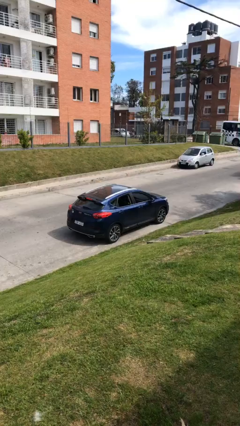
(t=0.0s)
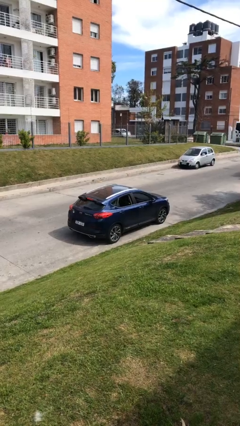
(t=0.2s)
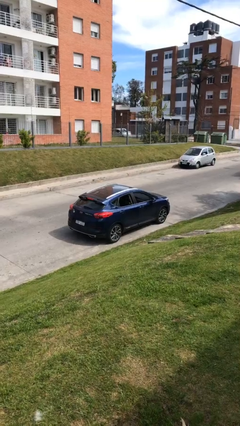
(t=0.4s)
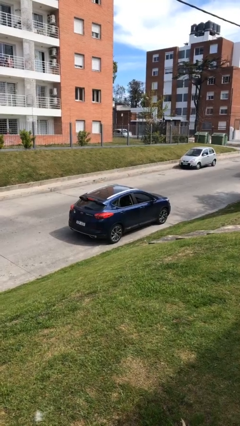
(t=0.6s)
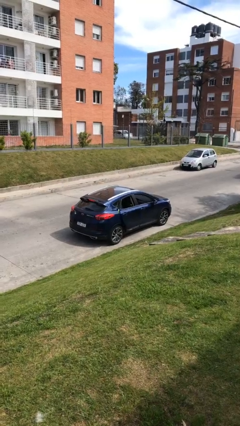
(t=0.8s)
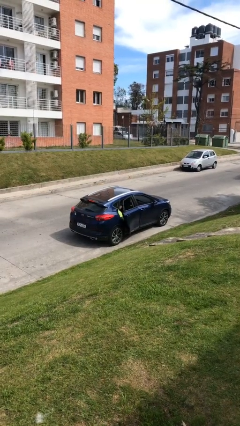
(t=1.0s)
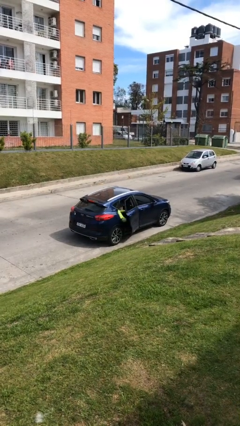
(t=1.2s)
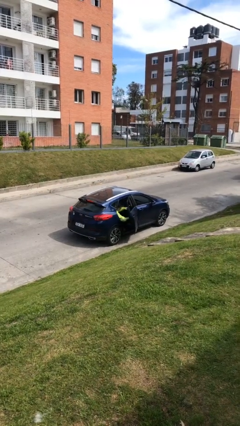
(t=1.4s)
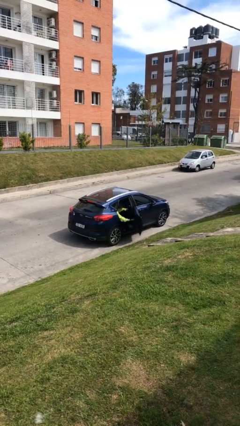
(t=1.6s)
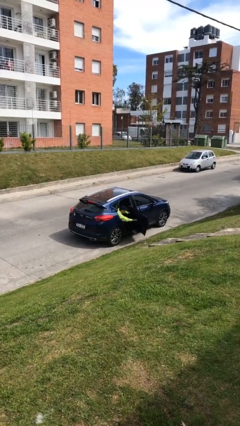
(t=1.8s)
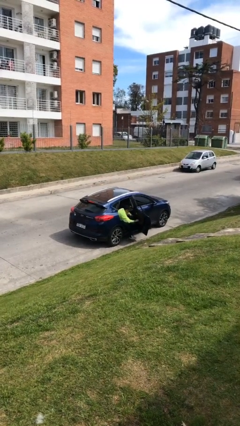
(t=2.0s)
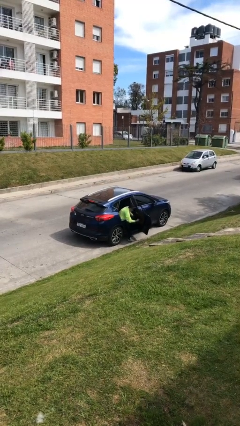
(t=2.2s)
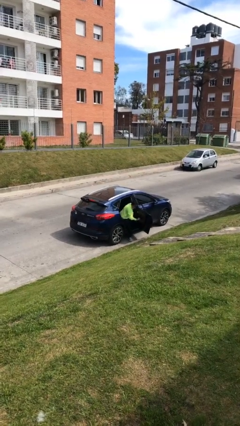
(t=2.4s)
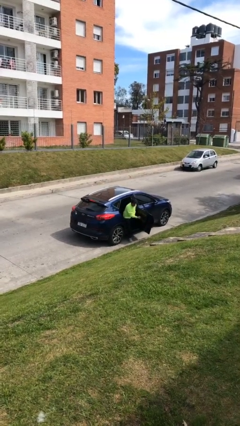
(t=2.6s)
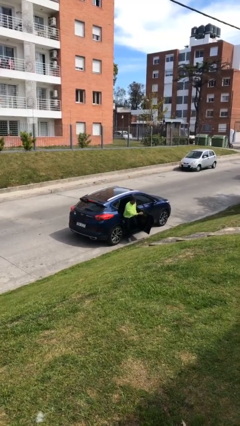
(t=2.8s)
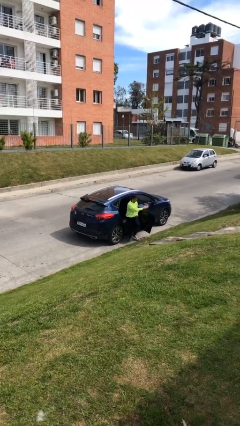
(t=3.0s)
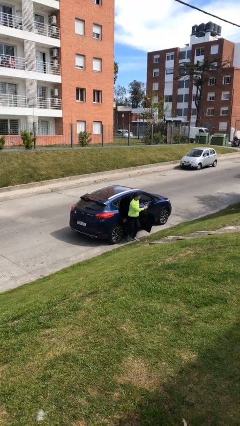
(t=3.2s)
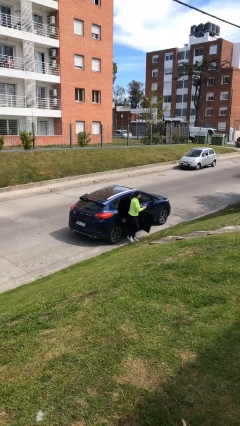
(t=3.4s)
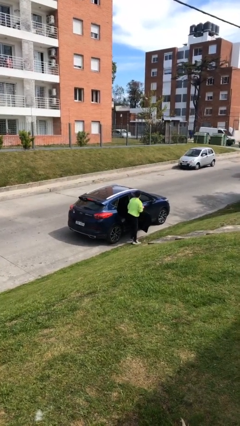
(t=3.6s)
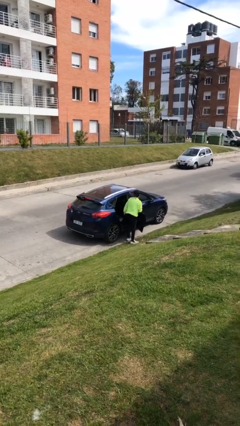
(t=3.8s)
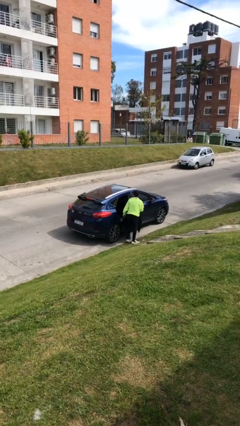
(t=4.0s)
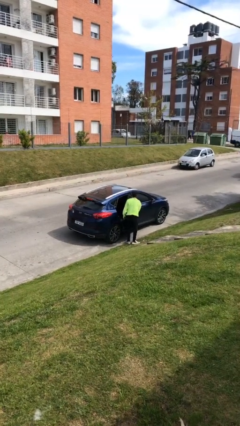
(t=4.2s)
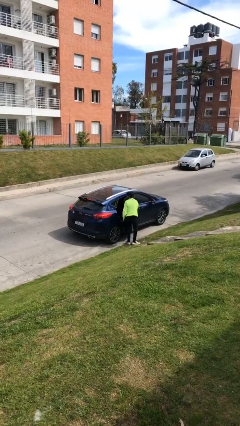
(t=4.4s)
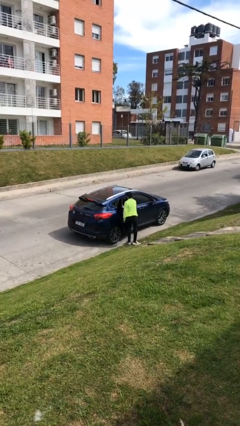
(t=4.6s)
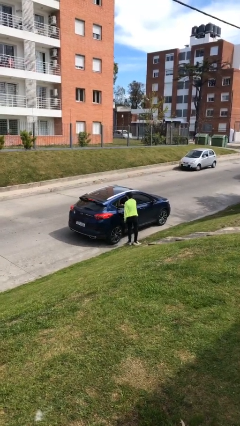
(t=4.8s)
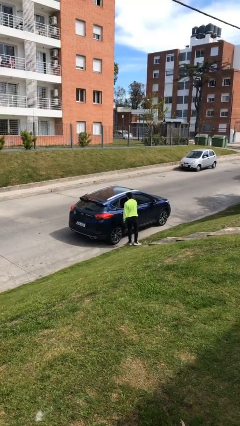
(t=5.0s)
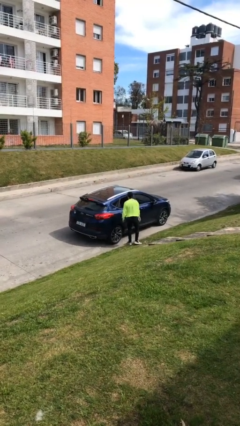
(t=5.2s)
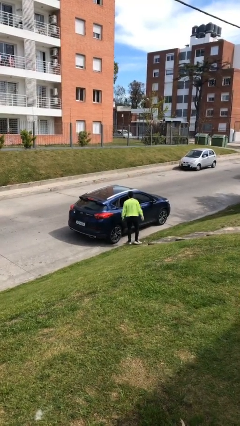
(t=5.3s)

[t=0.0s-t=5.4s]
car drops off person

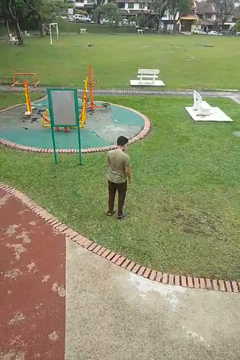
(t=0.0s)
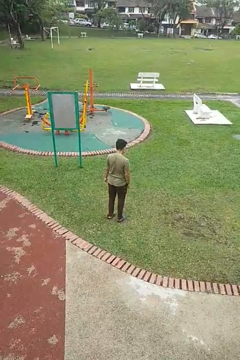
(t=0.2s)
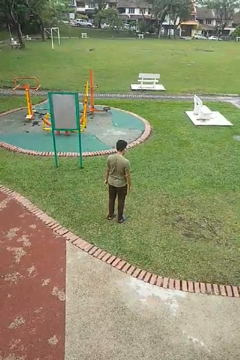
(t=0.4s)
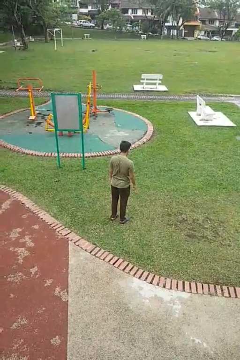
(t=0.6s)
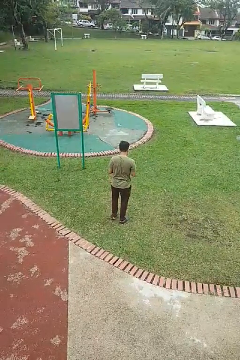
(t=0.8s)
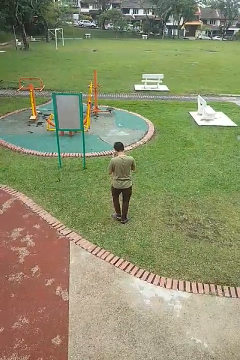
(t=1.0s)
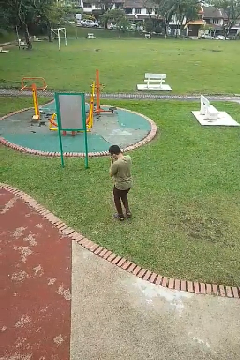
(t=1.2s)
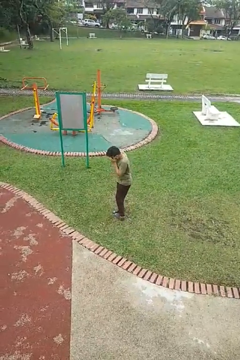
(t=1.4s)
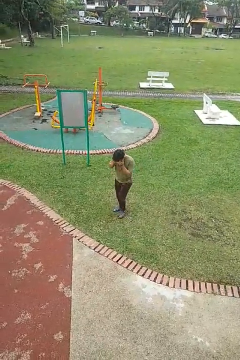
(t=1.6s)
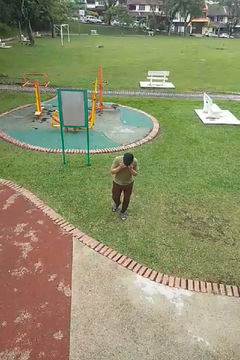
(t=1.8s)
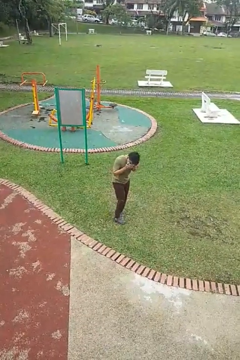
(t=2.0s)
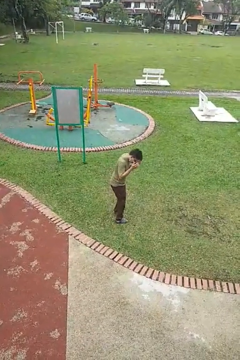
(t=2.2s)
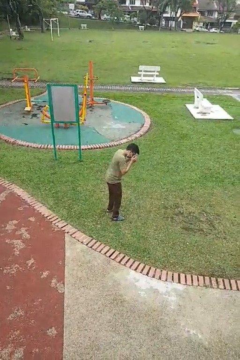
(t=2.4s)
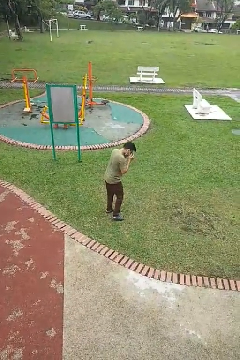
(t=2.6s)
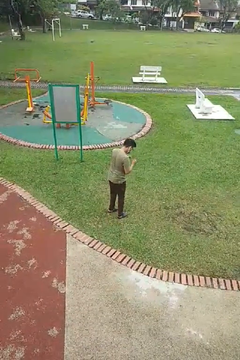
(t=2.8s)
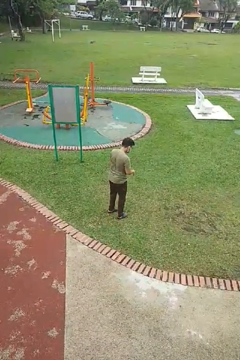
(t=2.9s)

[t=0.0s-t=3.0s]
person twirls

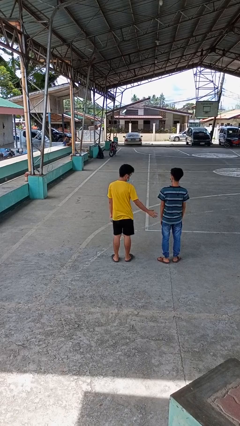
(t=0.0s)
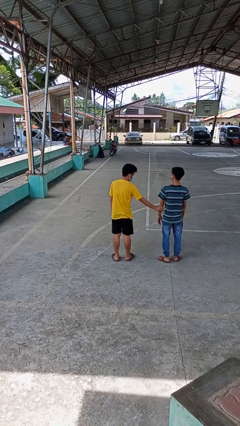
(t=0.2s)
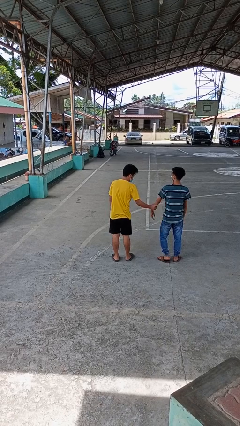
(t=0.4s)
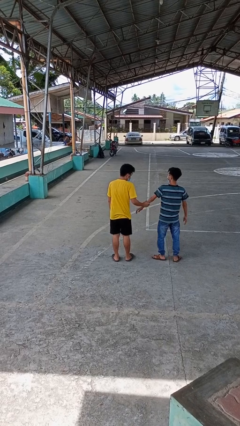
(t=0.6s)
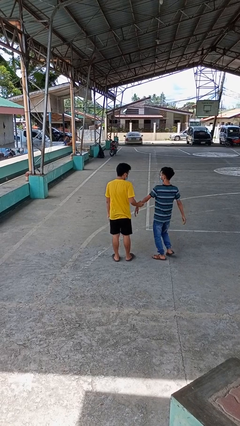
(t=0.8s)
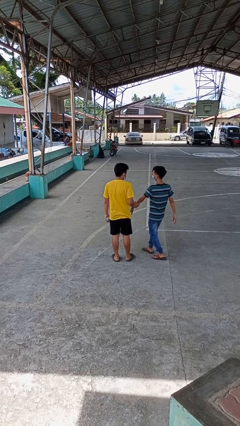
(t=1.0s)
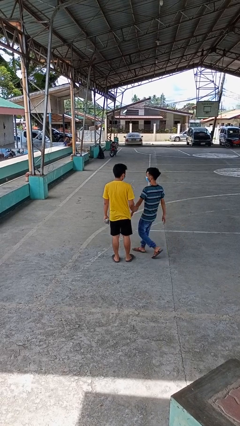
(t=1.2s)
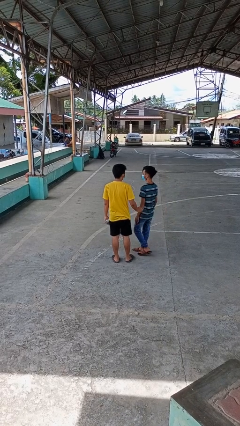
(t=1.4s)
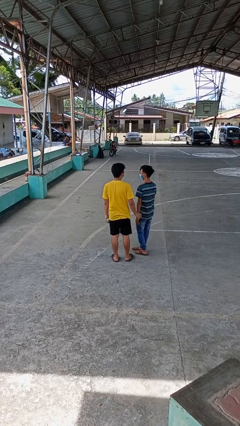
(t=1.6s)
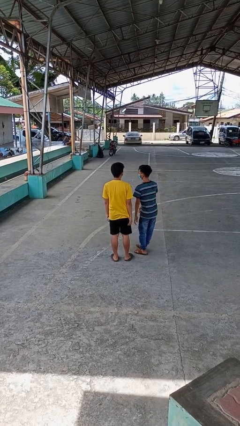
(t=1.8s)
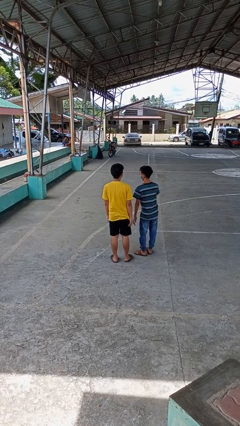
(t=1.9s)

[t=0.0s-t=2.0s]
person grabs person by forearm

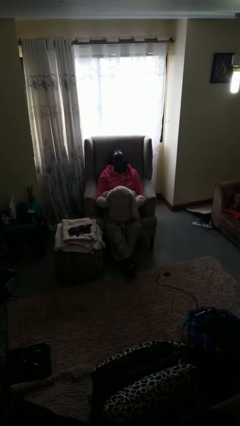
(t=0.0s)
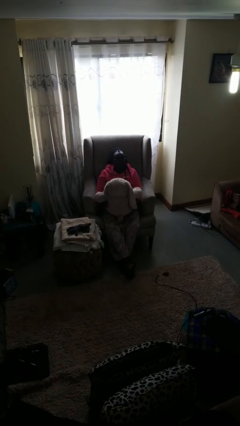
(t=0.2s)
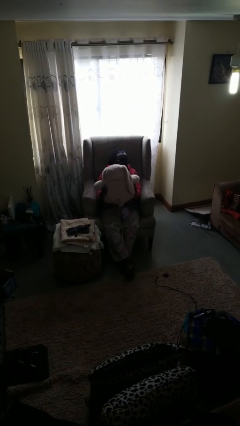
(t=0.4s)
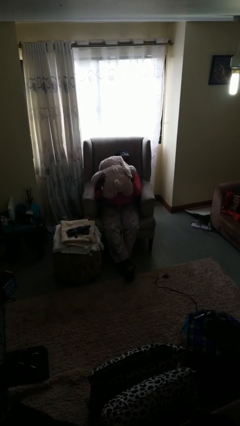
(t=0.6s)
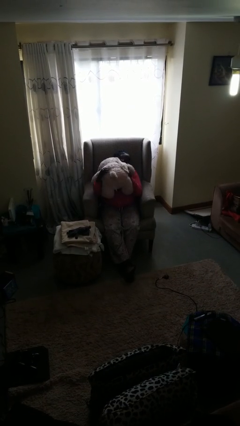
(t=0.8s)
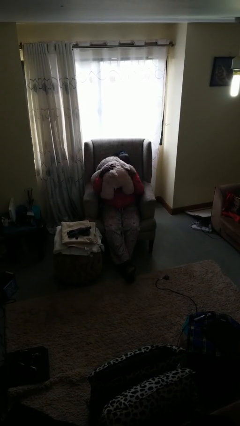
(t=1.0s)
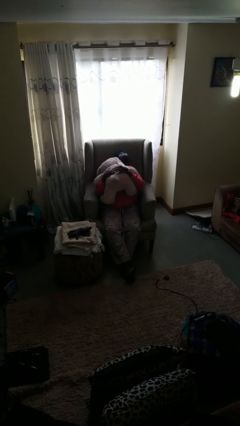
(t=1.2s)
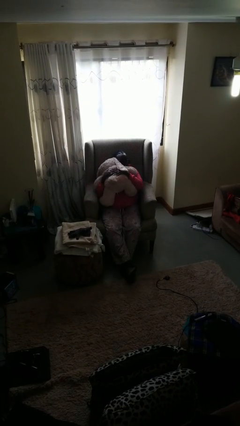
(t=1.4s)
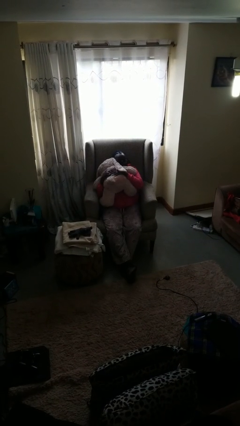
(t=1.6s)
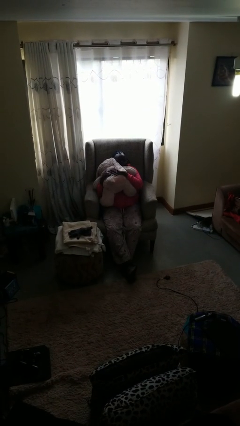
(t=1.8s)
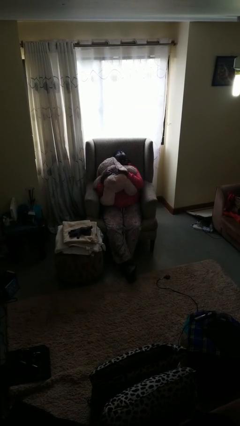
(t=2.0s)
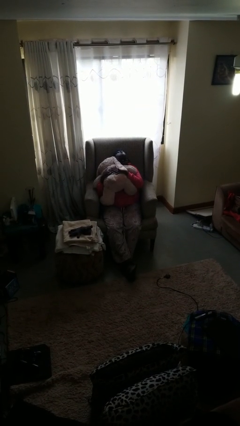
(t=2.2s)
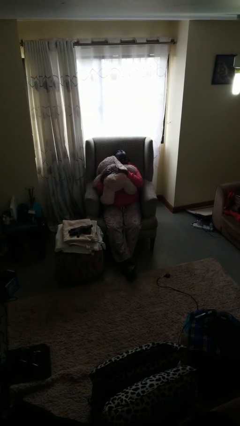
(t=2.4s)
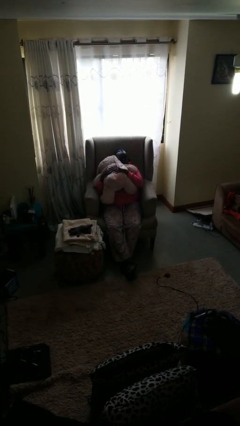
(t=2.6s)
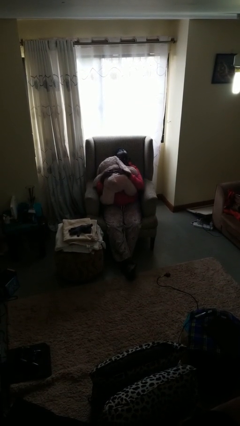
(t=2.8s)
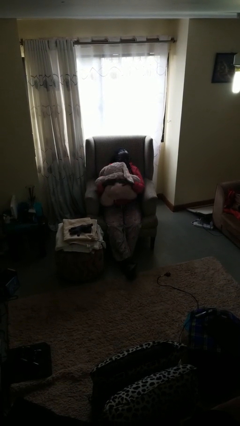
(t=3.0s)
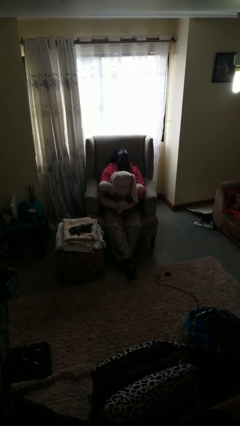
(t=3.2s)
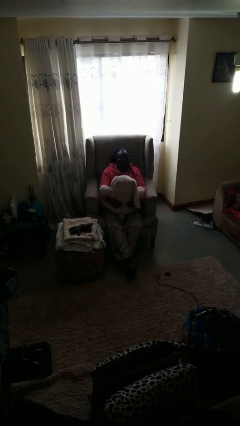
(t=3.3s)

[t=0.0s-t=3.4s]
person hugs stuffed animal

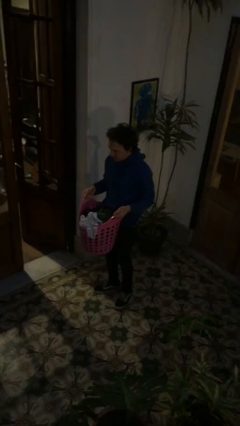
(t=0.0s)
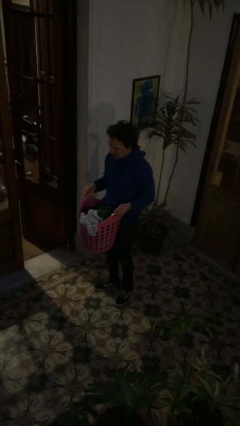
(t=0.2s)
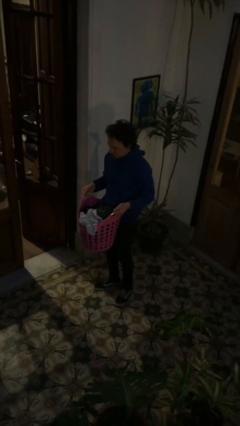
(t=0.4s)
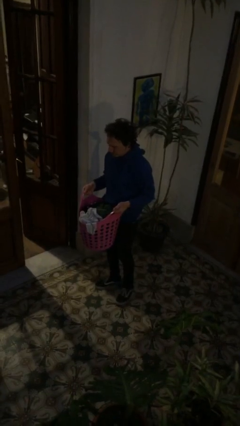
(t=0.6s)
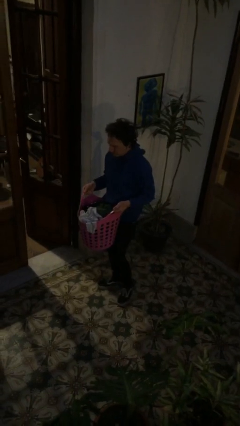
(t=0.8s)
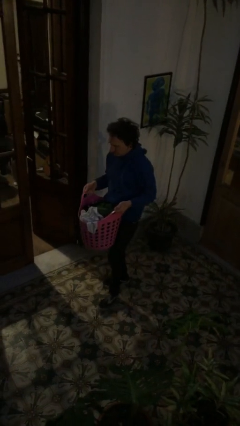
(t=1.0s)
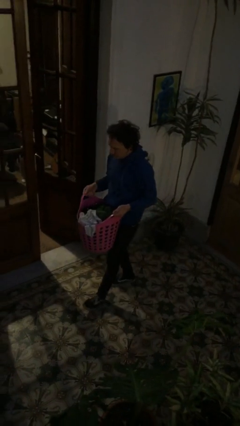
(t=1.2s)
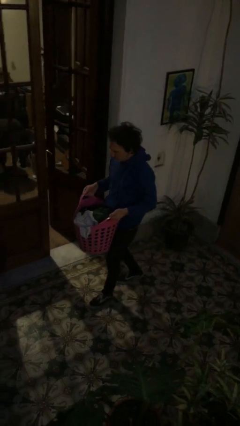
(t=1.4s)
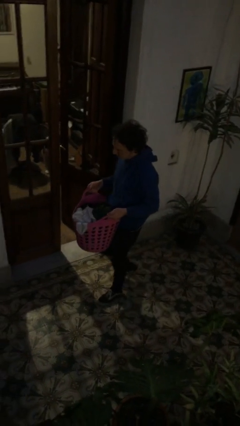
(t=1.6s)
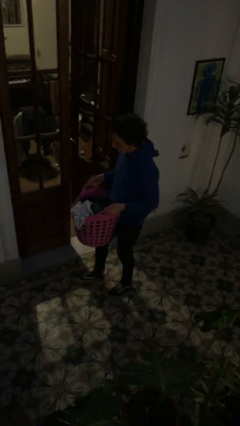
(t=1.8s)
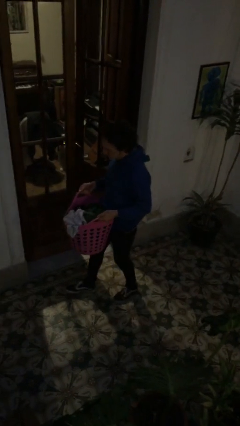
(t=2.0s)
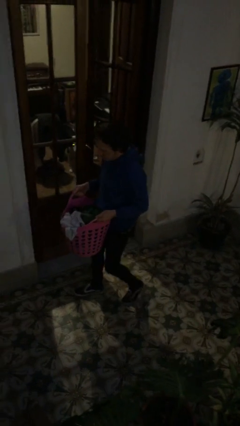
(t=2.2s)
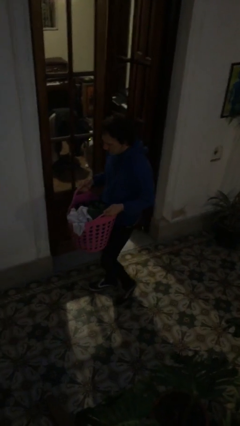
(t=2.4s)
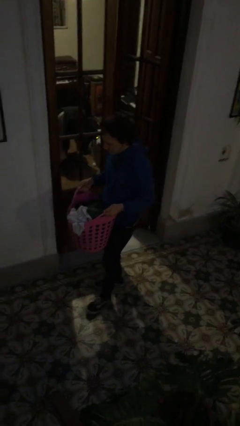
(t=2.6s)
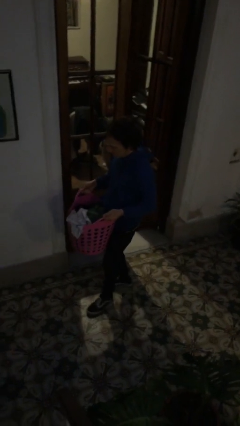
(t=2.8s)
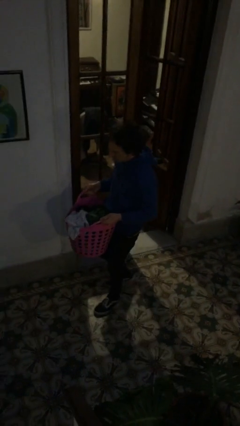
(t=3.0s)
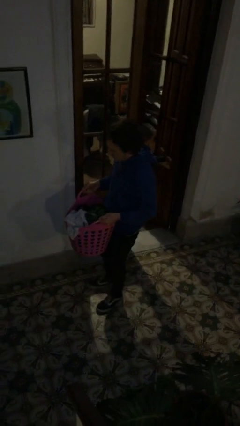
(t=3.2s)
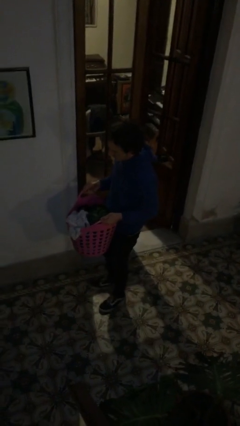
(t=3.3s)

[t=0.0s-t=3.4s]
person carries laundry basket

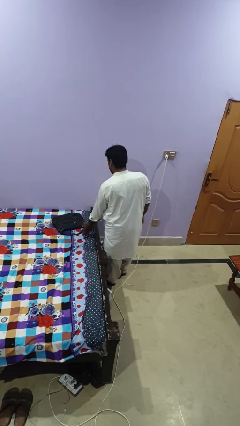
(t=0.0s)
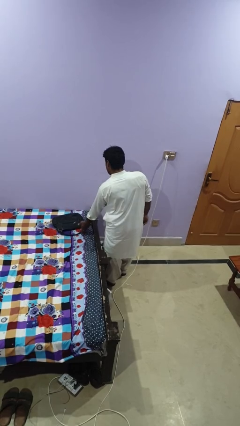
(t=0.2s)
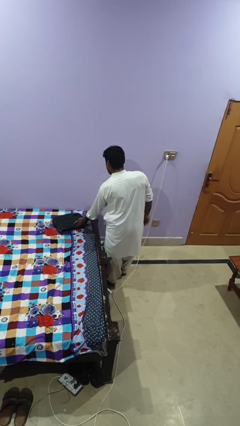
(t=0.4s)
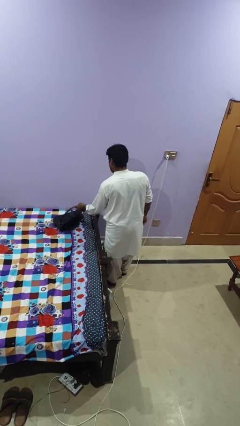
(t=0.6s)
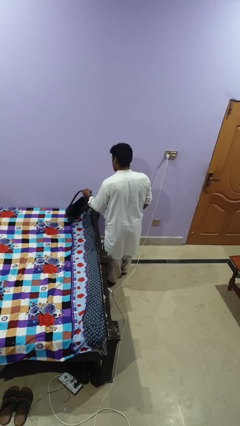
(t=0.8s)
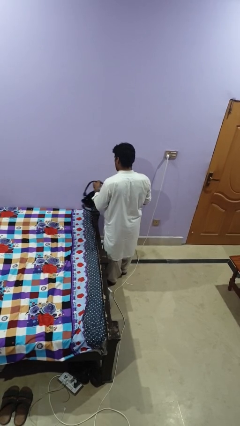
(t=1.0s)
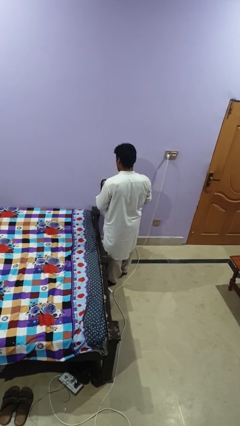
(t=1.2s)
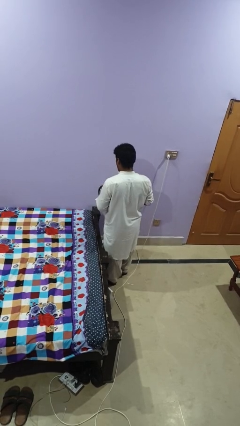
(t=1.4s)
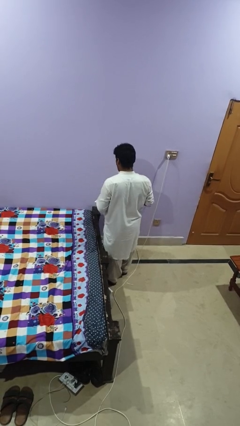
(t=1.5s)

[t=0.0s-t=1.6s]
person picks up object from bed
